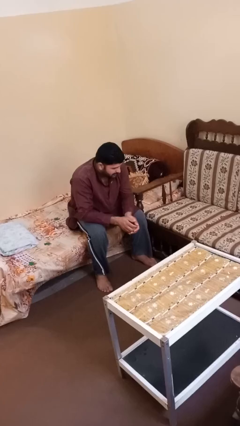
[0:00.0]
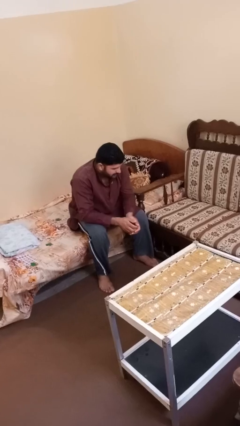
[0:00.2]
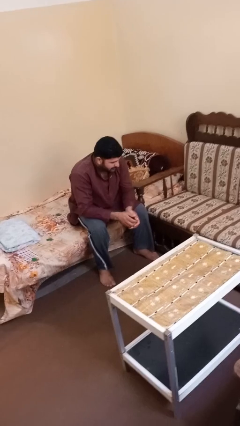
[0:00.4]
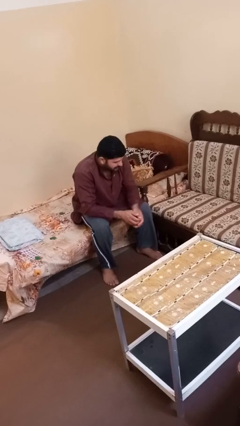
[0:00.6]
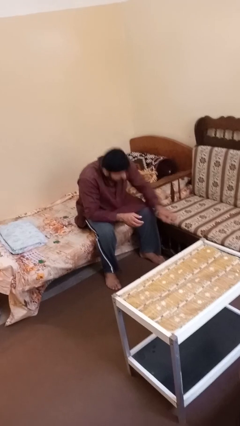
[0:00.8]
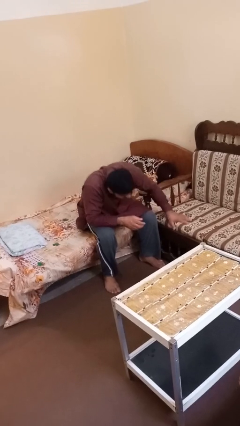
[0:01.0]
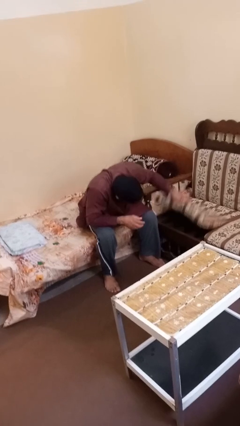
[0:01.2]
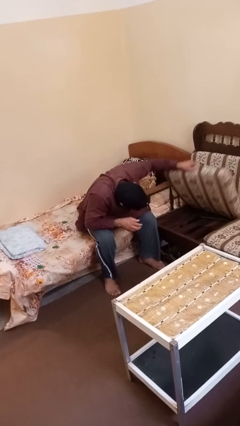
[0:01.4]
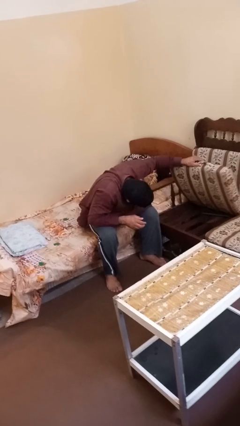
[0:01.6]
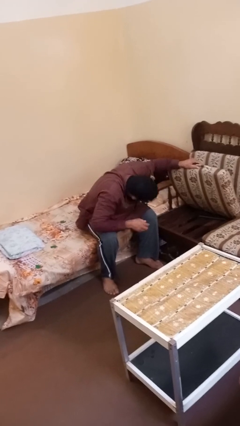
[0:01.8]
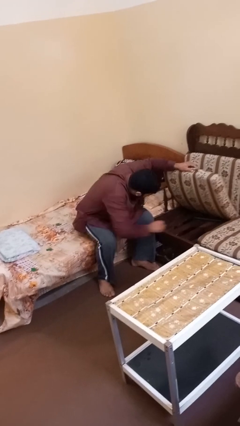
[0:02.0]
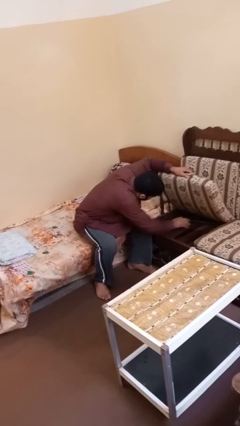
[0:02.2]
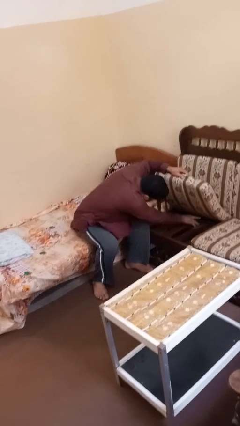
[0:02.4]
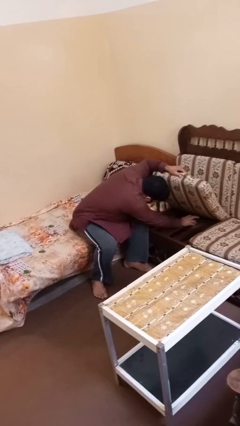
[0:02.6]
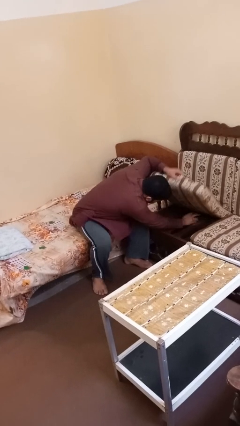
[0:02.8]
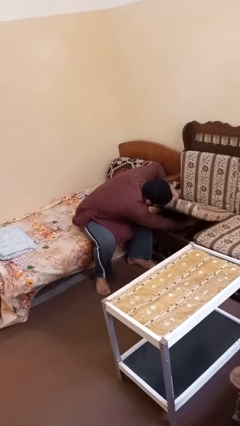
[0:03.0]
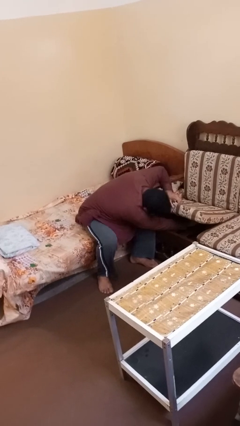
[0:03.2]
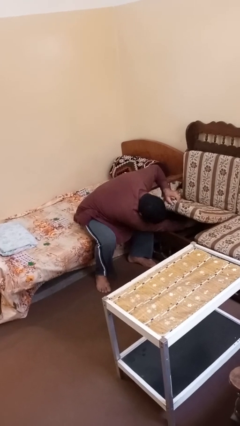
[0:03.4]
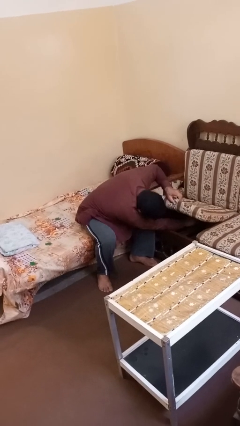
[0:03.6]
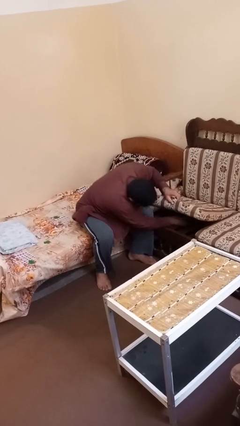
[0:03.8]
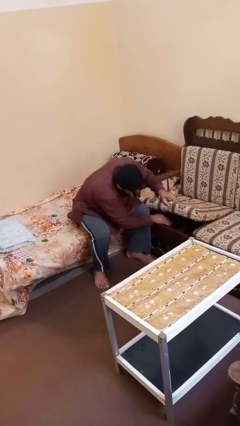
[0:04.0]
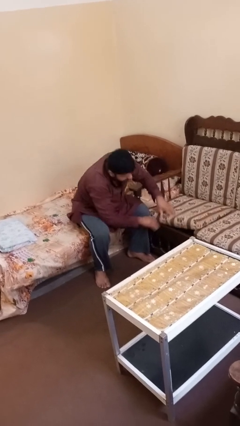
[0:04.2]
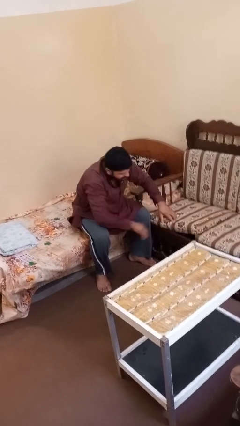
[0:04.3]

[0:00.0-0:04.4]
person searches under couch

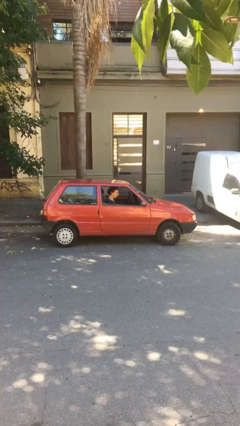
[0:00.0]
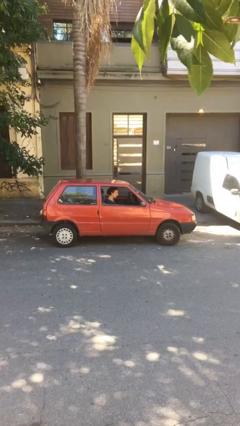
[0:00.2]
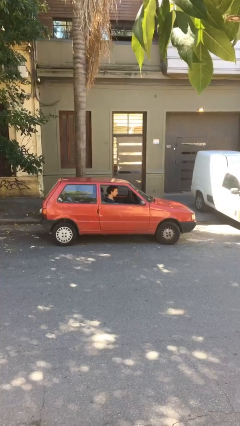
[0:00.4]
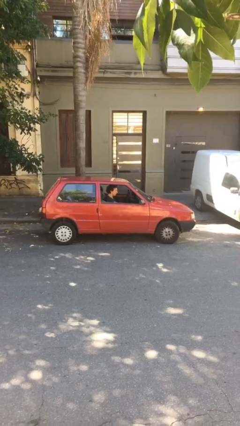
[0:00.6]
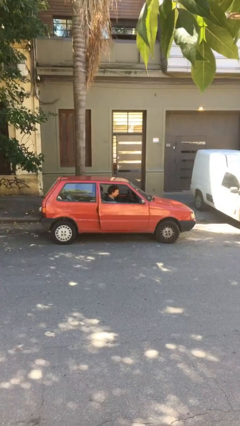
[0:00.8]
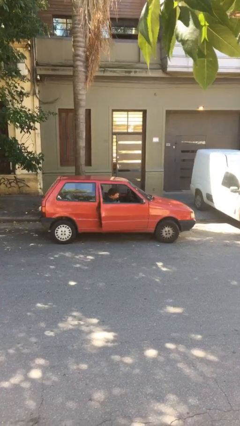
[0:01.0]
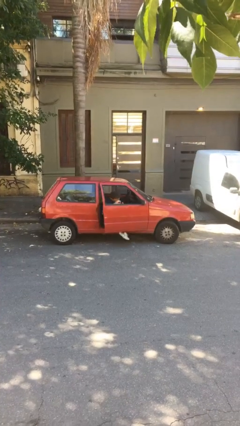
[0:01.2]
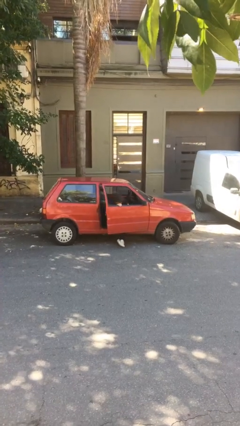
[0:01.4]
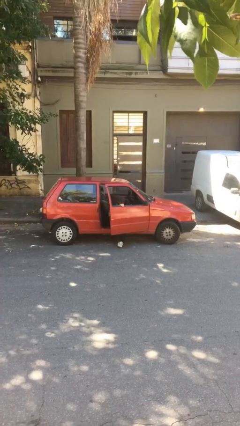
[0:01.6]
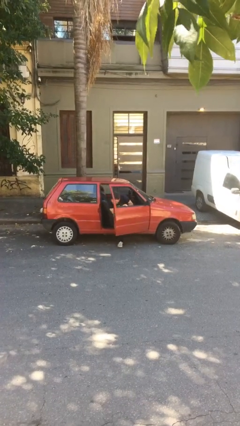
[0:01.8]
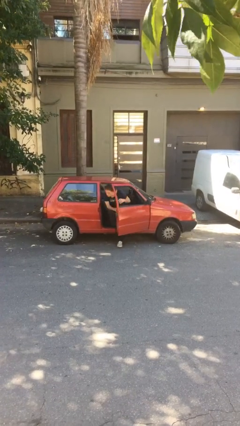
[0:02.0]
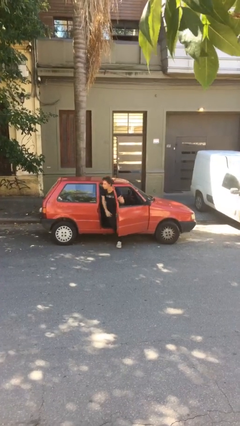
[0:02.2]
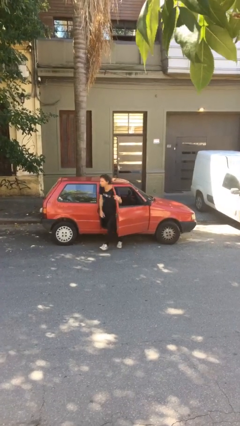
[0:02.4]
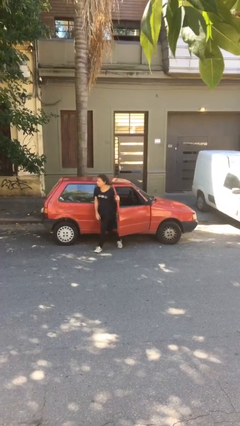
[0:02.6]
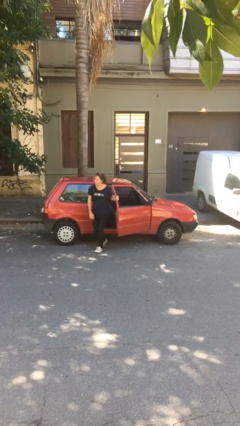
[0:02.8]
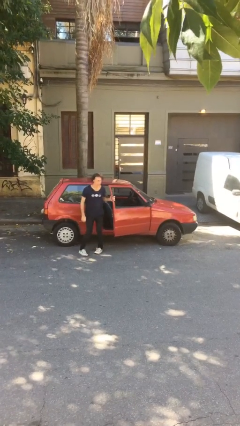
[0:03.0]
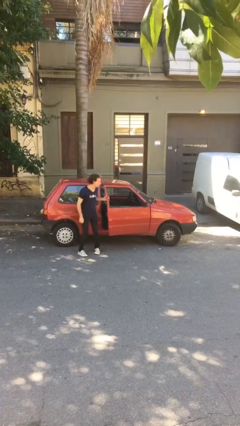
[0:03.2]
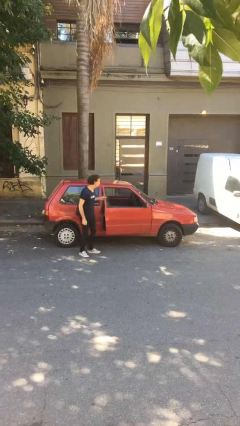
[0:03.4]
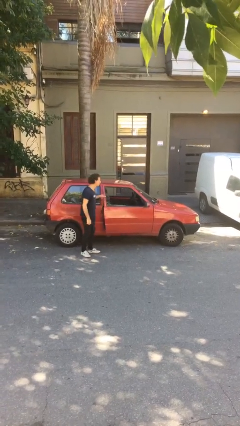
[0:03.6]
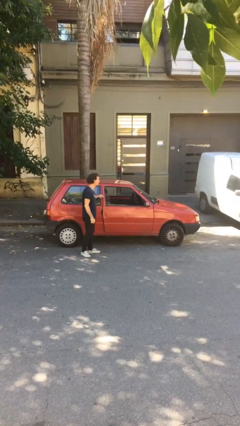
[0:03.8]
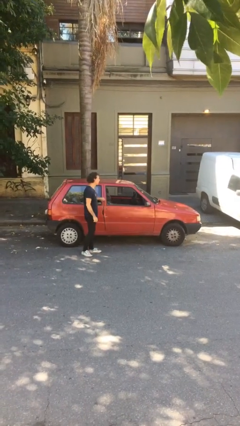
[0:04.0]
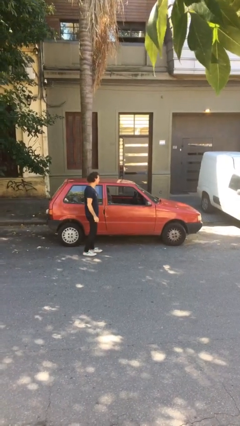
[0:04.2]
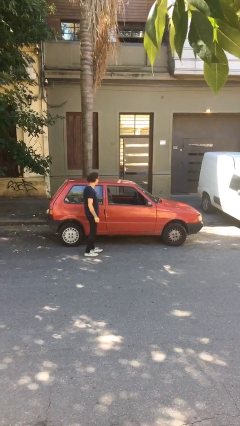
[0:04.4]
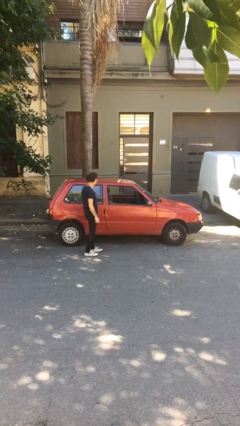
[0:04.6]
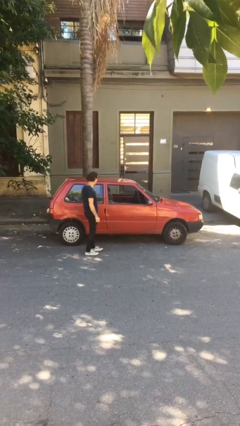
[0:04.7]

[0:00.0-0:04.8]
car drops off person

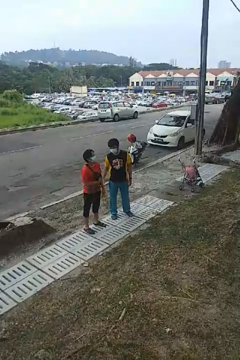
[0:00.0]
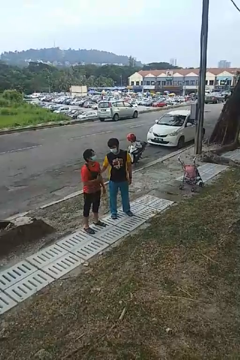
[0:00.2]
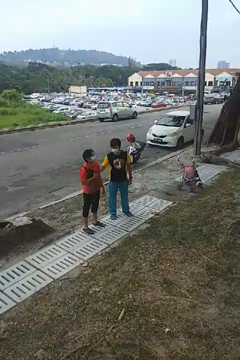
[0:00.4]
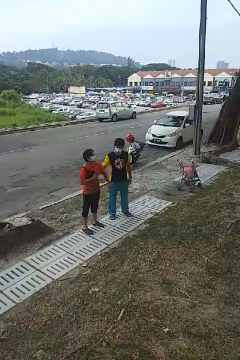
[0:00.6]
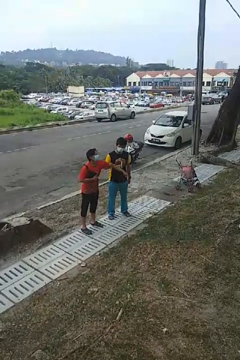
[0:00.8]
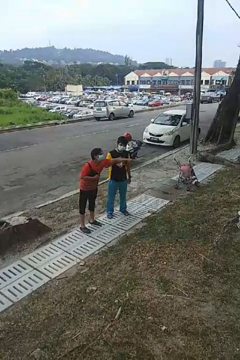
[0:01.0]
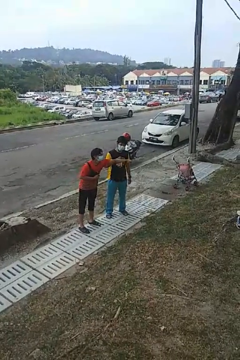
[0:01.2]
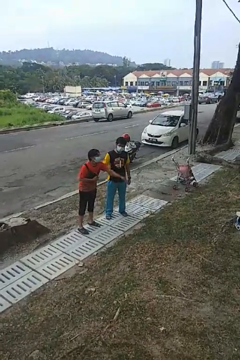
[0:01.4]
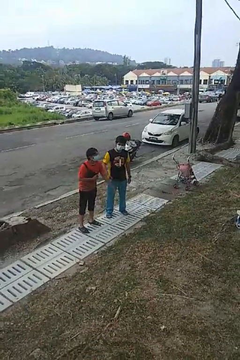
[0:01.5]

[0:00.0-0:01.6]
person grabs person by bicep

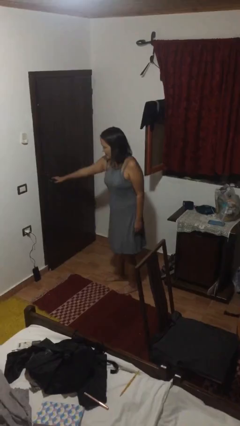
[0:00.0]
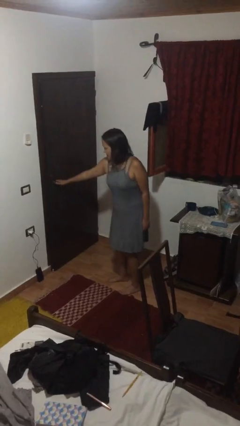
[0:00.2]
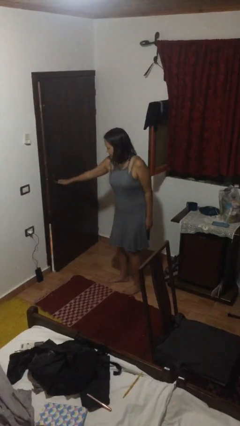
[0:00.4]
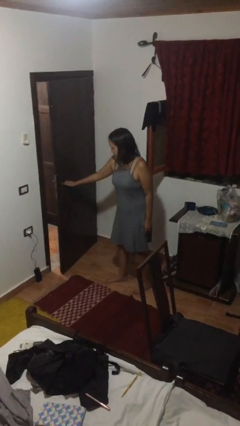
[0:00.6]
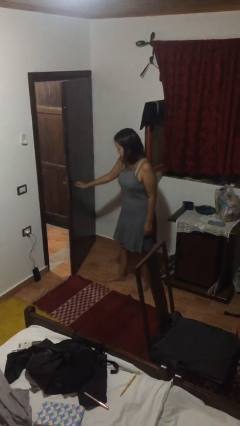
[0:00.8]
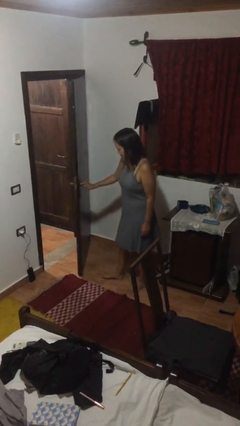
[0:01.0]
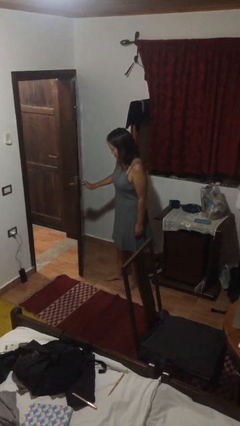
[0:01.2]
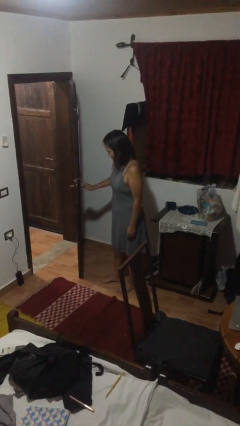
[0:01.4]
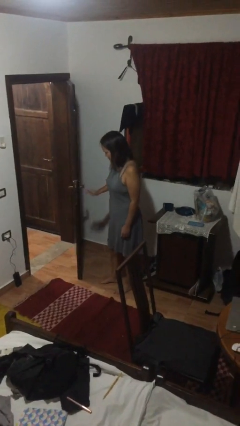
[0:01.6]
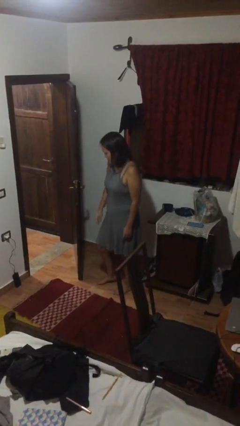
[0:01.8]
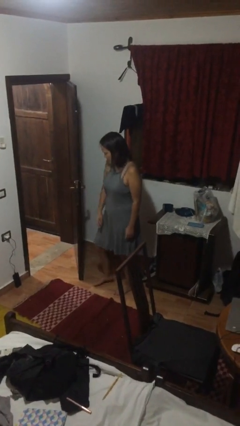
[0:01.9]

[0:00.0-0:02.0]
person opens facility door

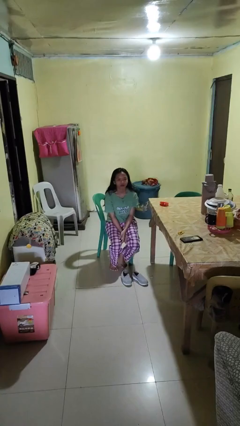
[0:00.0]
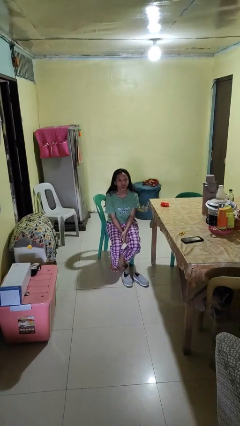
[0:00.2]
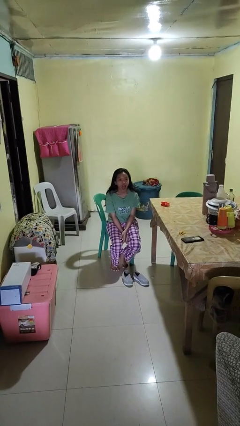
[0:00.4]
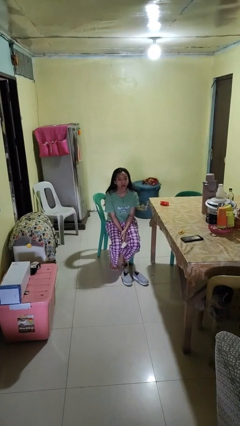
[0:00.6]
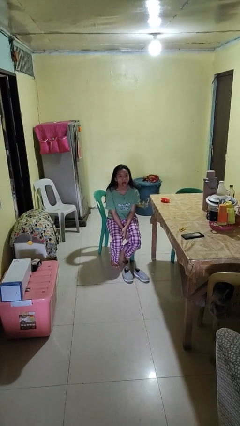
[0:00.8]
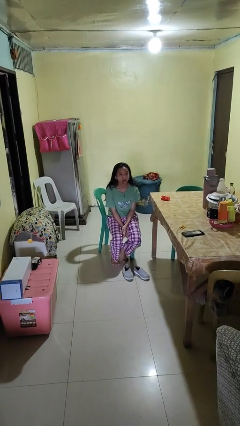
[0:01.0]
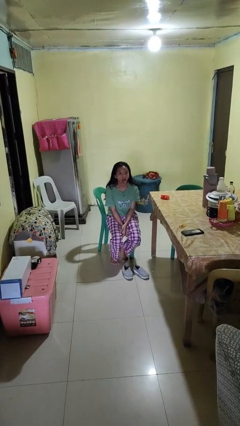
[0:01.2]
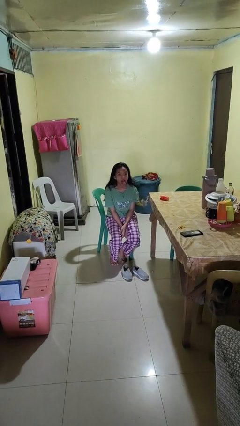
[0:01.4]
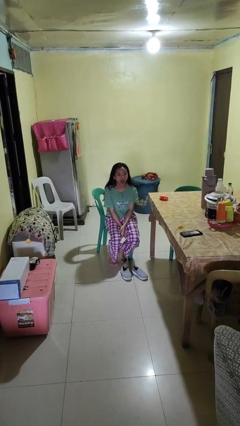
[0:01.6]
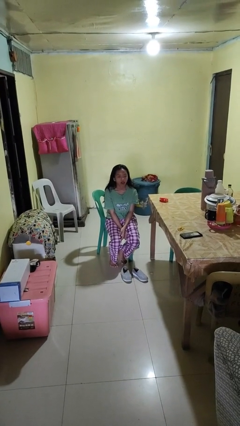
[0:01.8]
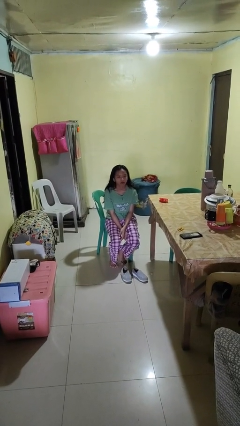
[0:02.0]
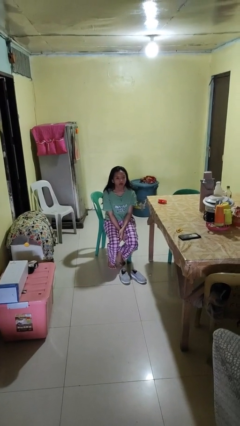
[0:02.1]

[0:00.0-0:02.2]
person sticks out tongue

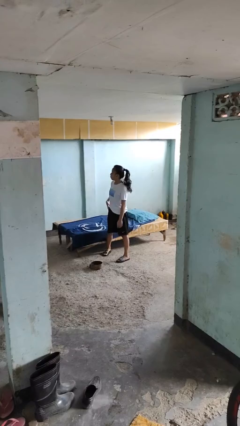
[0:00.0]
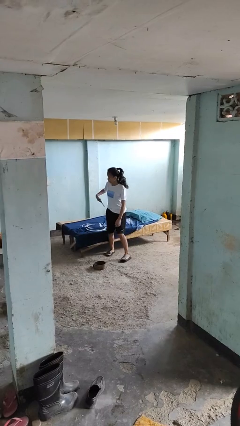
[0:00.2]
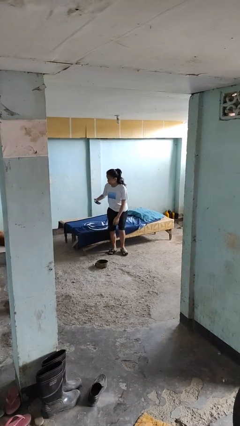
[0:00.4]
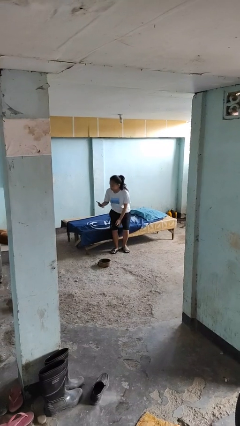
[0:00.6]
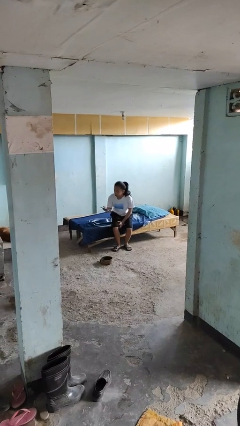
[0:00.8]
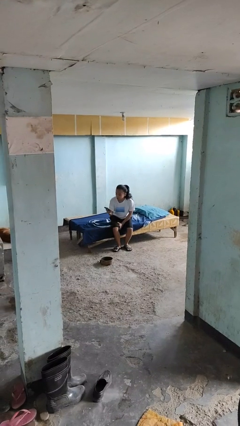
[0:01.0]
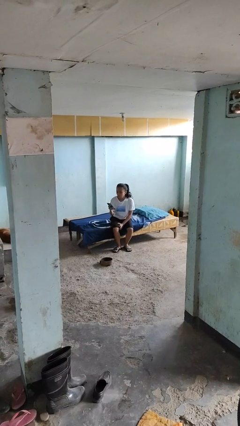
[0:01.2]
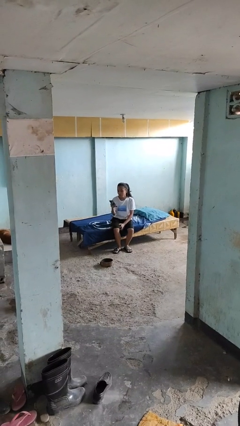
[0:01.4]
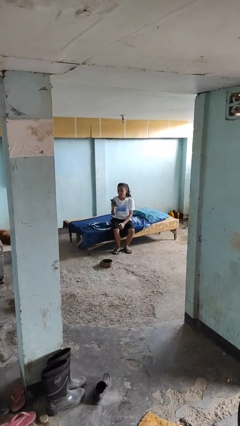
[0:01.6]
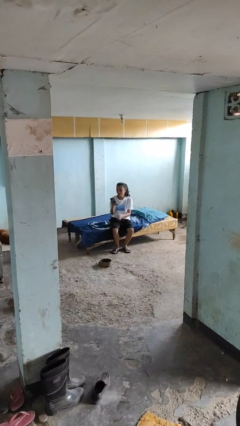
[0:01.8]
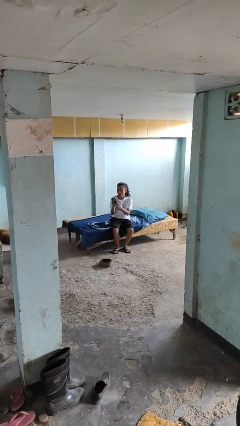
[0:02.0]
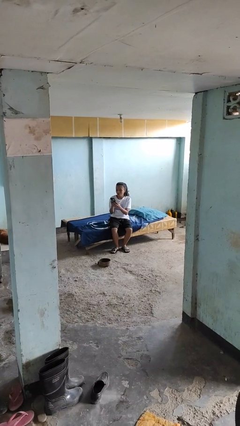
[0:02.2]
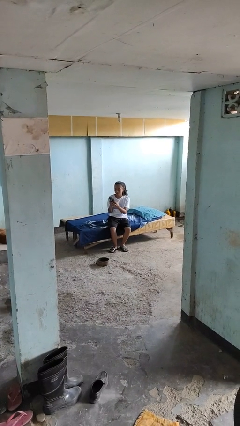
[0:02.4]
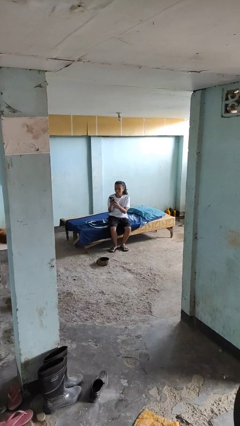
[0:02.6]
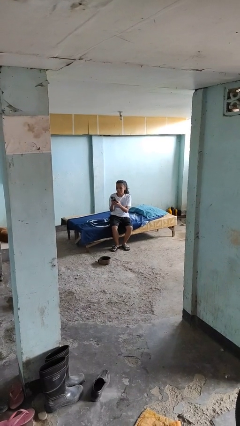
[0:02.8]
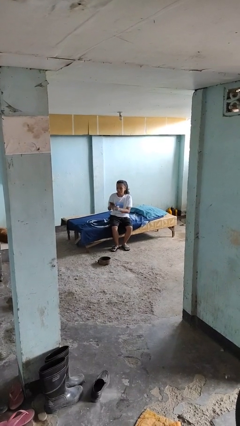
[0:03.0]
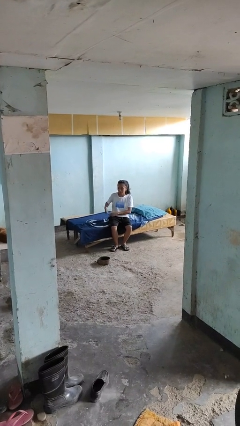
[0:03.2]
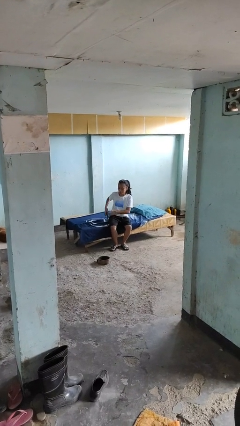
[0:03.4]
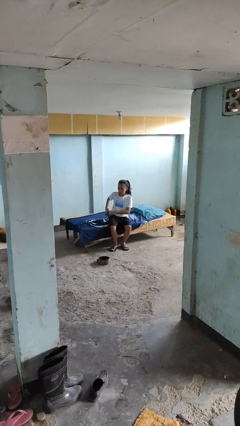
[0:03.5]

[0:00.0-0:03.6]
person takes phone from pocket
